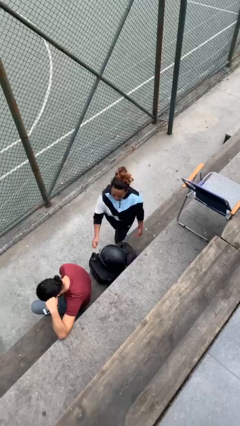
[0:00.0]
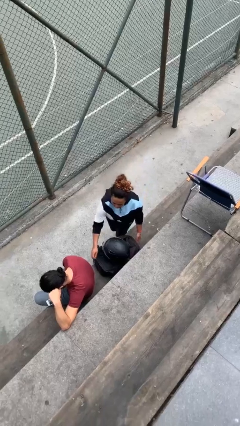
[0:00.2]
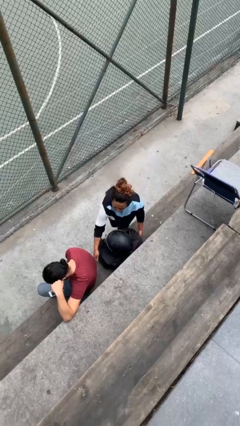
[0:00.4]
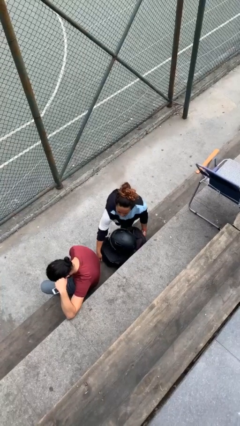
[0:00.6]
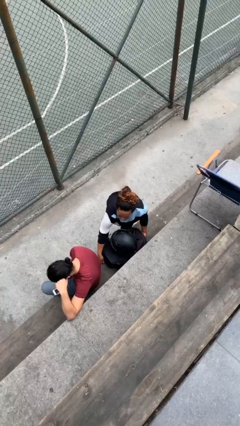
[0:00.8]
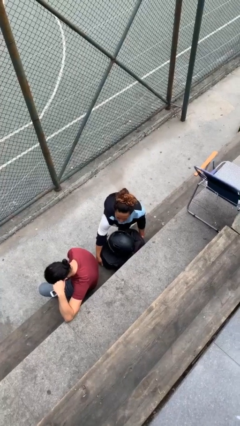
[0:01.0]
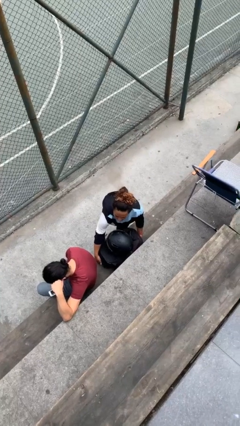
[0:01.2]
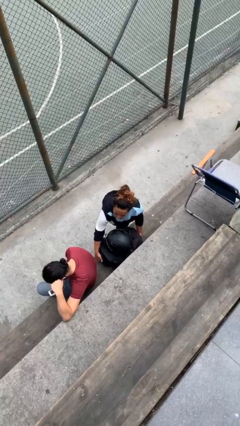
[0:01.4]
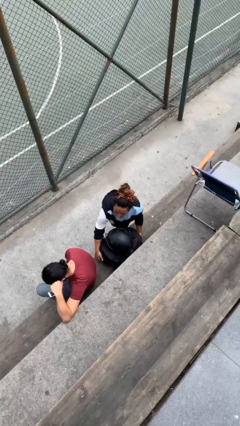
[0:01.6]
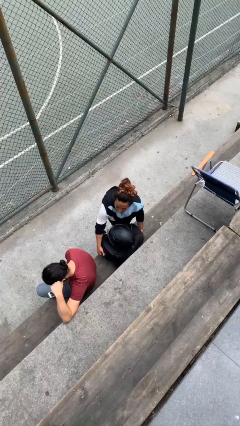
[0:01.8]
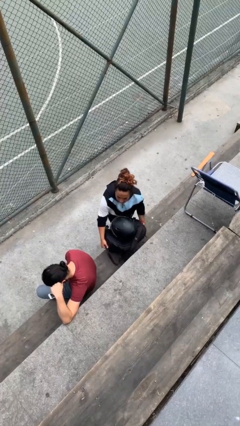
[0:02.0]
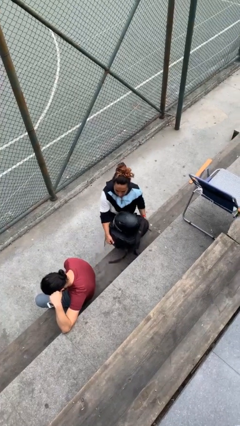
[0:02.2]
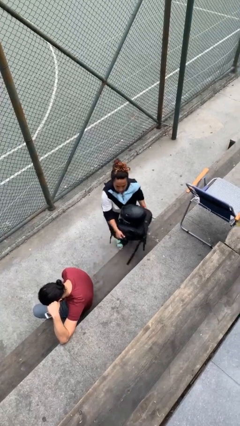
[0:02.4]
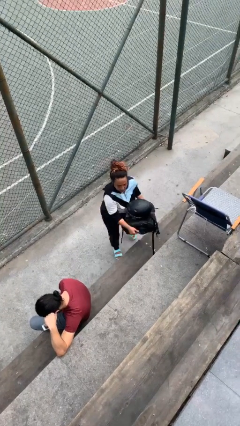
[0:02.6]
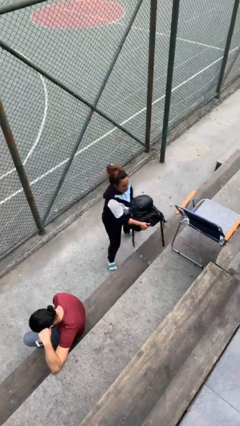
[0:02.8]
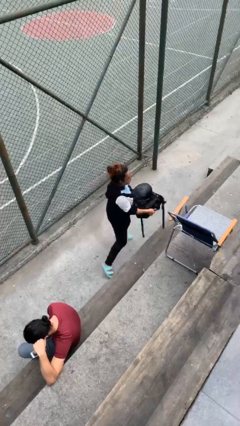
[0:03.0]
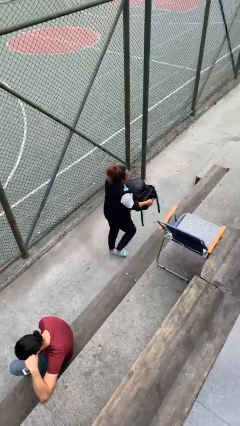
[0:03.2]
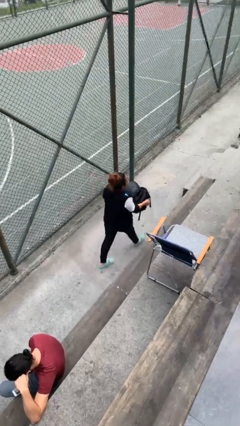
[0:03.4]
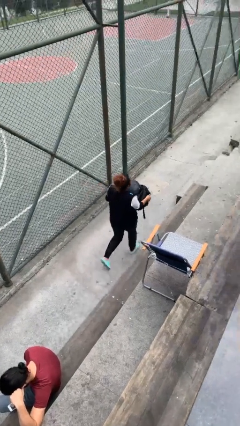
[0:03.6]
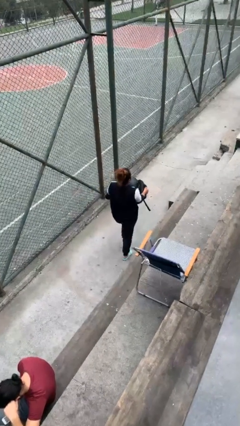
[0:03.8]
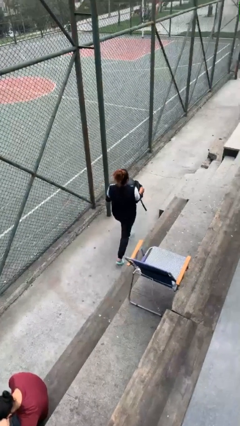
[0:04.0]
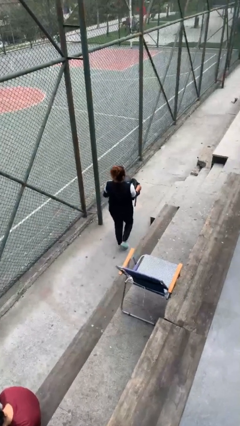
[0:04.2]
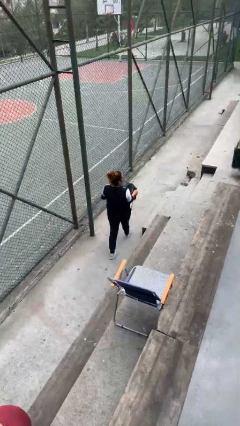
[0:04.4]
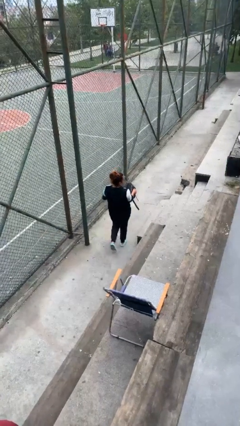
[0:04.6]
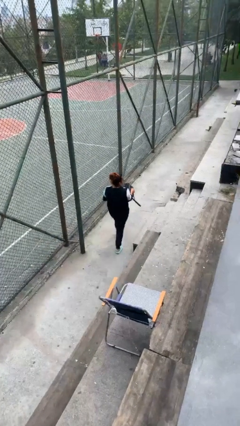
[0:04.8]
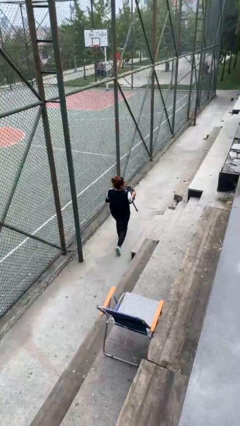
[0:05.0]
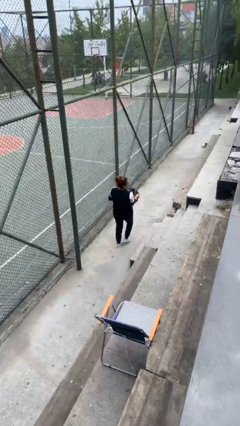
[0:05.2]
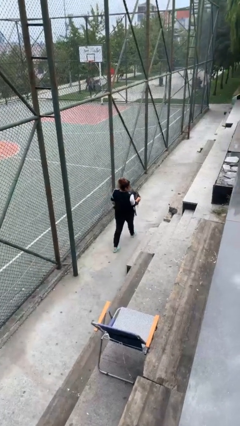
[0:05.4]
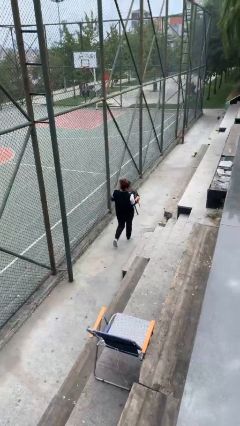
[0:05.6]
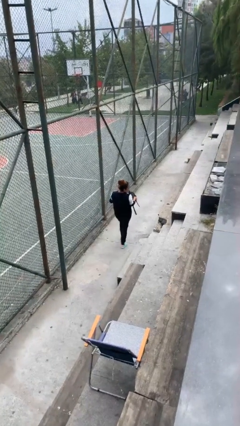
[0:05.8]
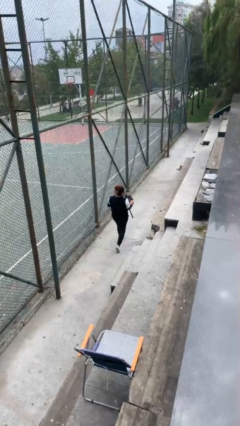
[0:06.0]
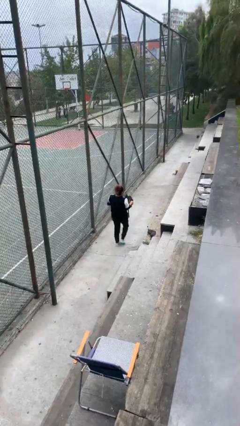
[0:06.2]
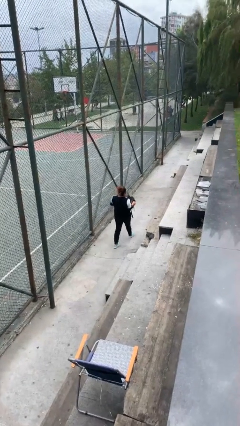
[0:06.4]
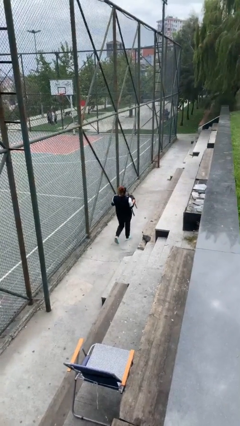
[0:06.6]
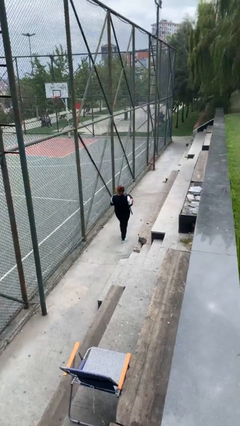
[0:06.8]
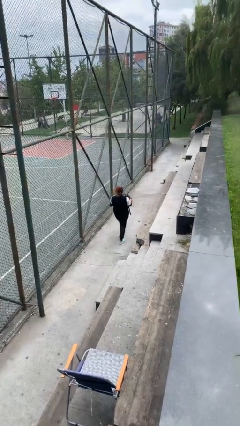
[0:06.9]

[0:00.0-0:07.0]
person steals object from person

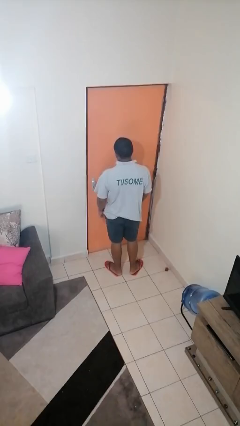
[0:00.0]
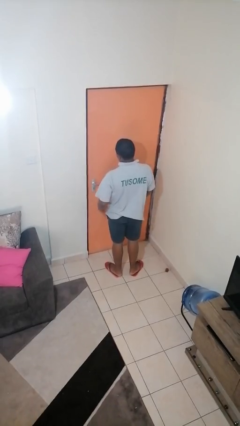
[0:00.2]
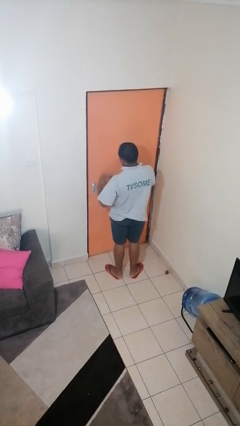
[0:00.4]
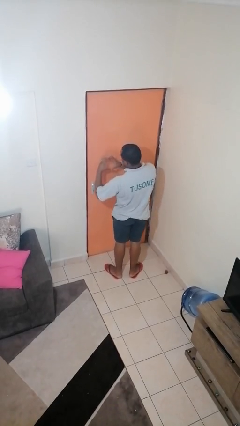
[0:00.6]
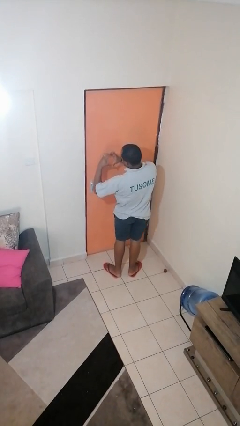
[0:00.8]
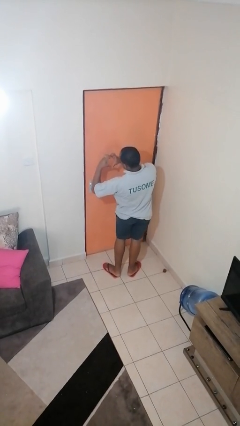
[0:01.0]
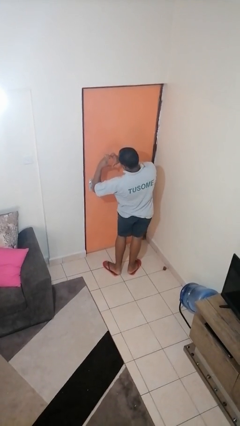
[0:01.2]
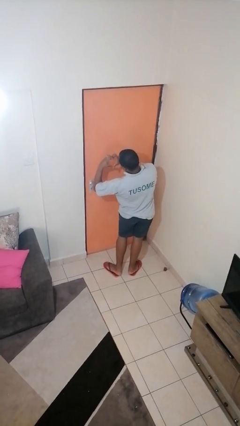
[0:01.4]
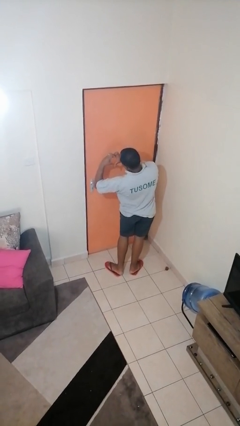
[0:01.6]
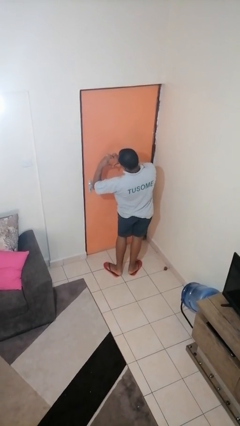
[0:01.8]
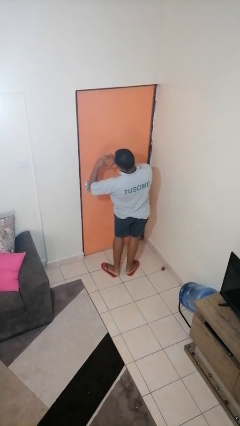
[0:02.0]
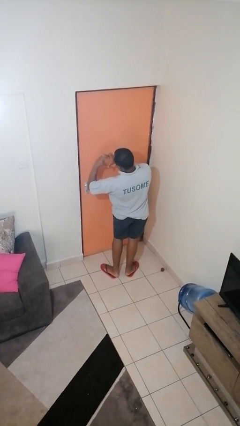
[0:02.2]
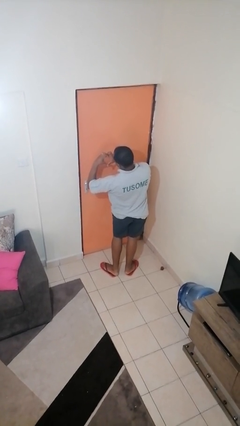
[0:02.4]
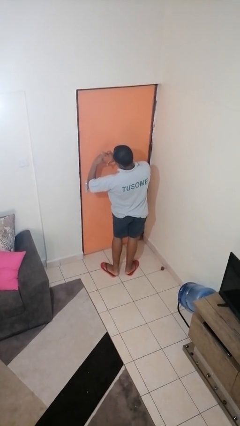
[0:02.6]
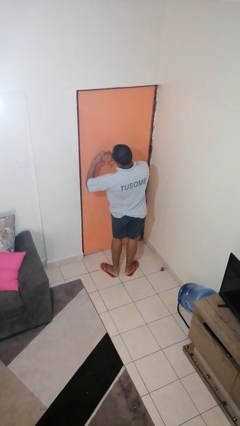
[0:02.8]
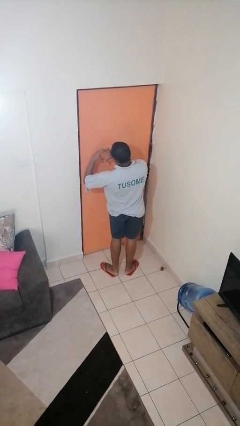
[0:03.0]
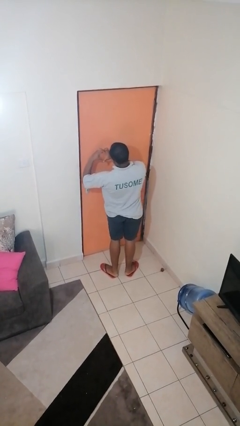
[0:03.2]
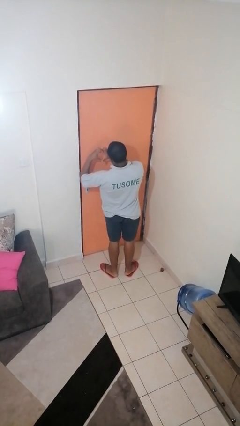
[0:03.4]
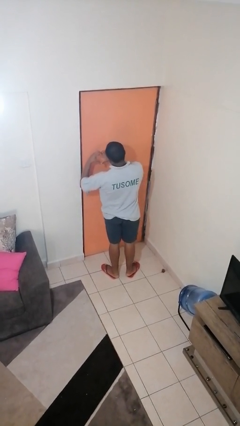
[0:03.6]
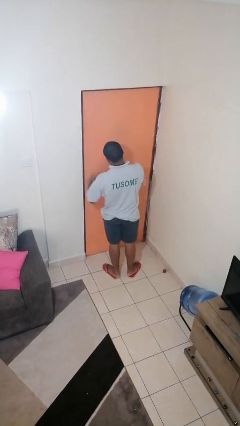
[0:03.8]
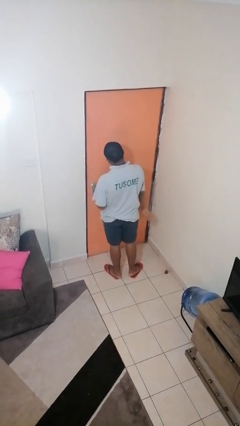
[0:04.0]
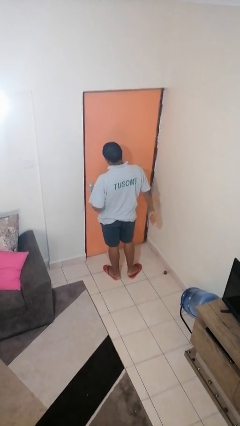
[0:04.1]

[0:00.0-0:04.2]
person gestures heart

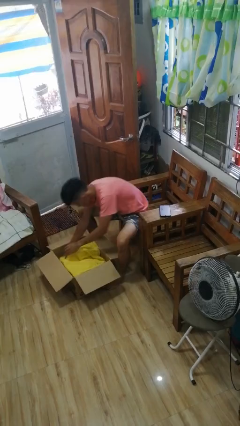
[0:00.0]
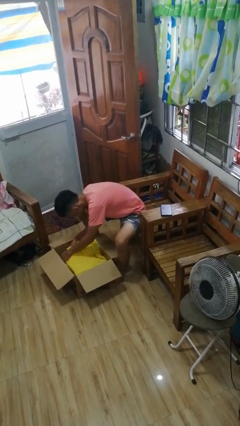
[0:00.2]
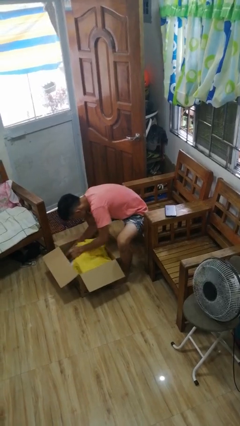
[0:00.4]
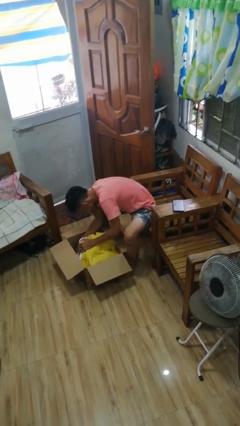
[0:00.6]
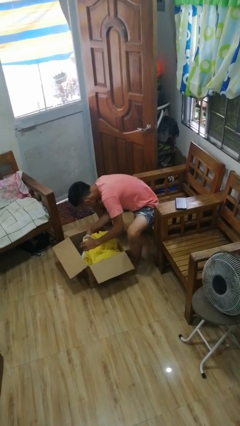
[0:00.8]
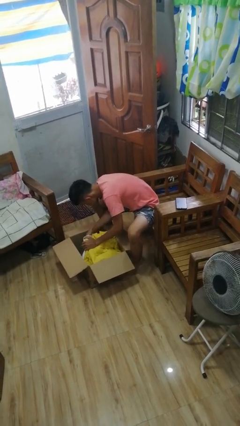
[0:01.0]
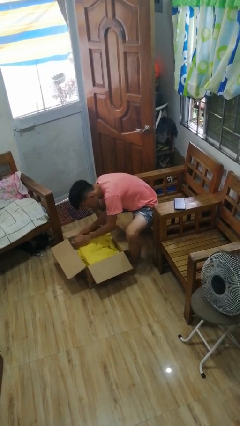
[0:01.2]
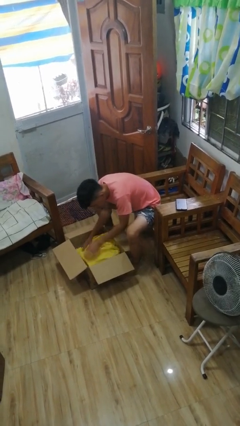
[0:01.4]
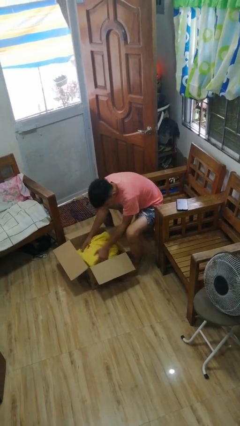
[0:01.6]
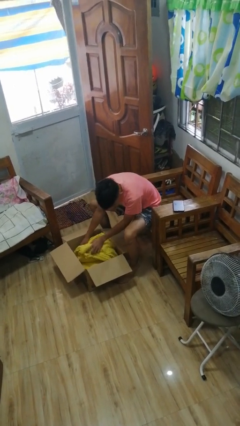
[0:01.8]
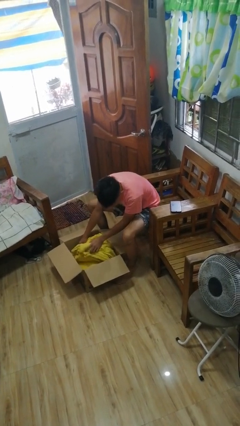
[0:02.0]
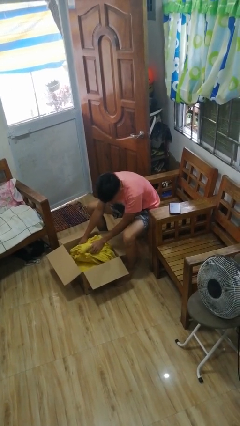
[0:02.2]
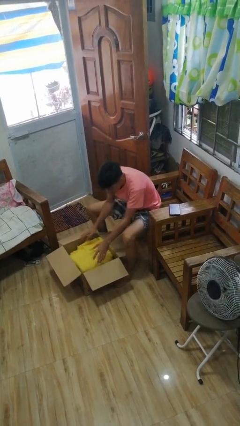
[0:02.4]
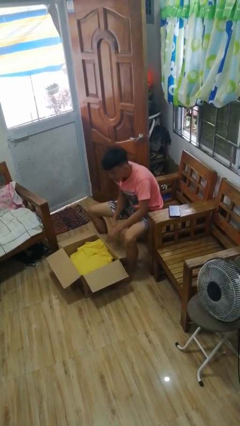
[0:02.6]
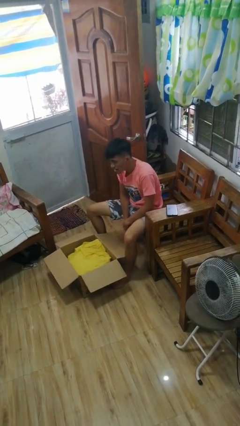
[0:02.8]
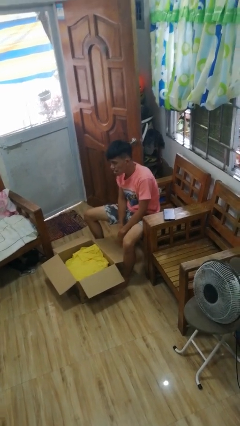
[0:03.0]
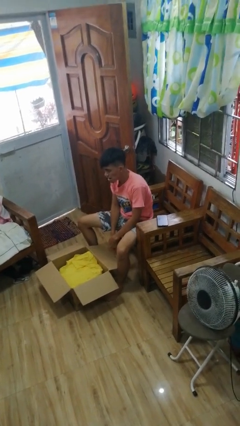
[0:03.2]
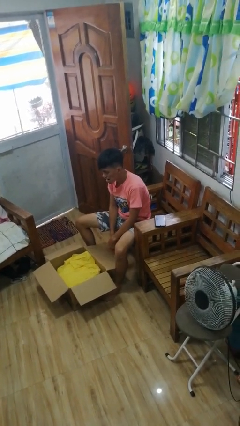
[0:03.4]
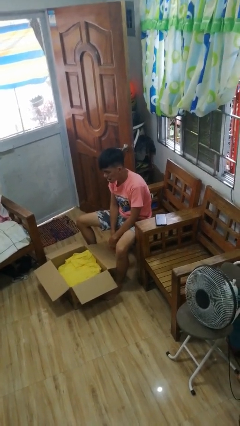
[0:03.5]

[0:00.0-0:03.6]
person searches in box

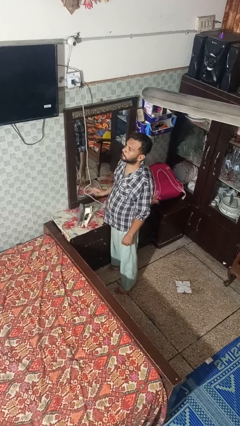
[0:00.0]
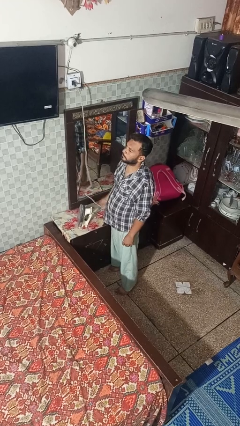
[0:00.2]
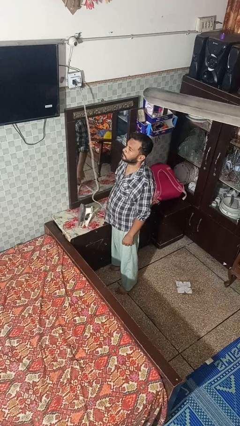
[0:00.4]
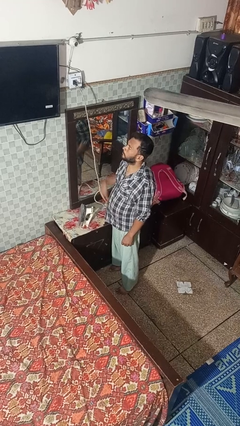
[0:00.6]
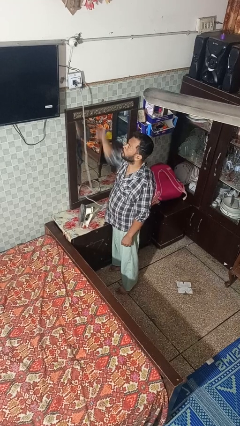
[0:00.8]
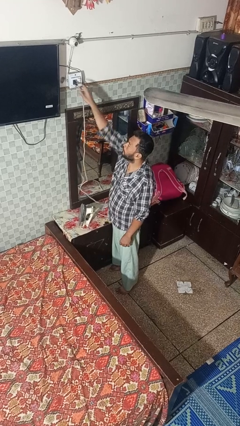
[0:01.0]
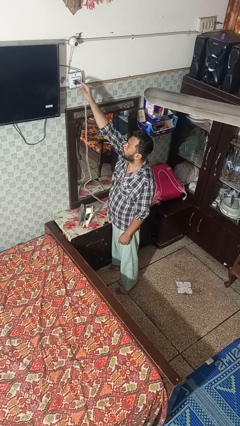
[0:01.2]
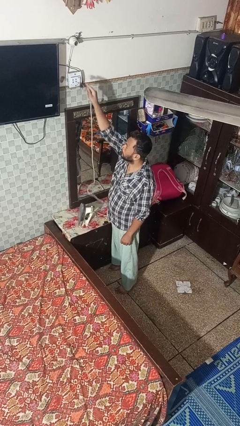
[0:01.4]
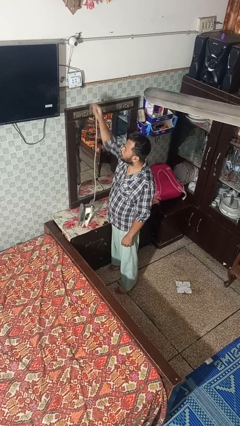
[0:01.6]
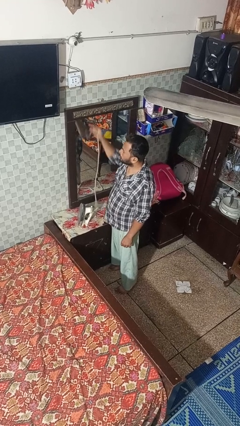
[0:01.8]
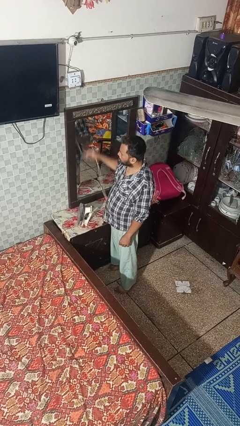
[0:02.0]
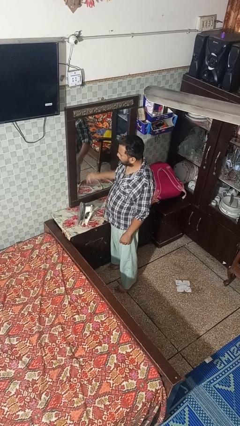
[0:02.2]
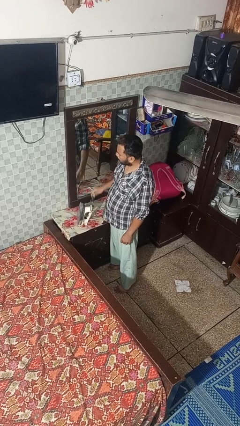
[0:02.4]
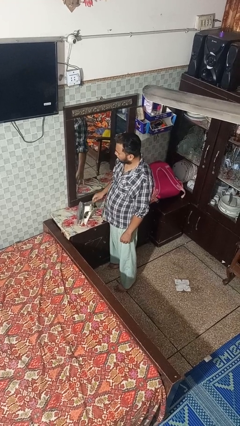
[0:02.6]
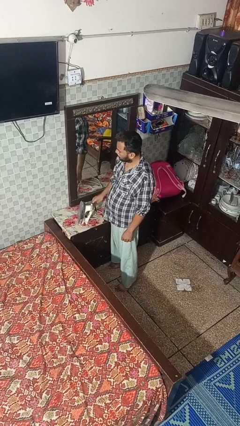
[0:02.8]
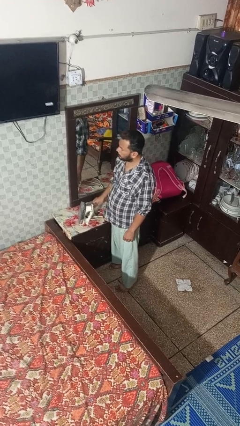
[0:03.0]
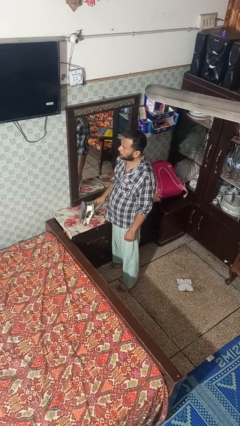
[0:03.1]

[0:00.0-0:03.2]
person unplugs from electrical socket
